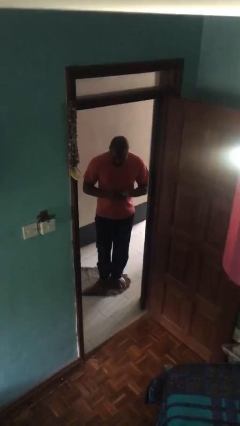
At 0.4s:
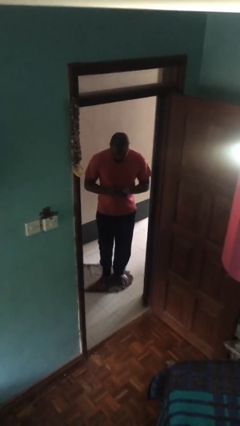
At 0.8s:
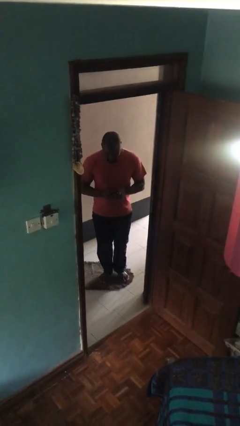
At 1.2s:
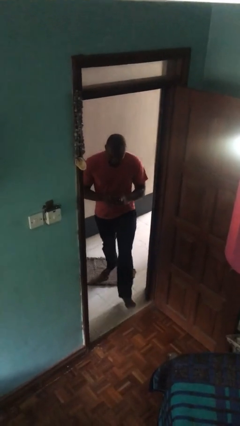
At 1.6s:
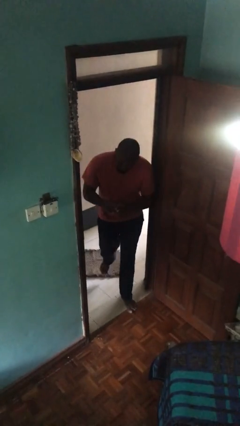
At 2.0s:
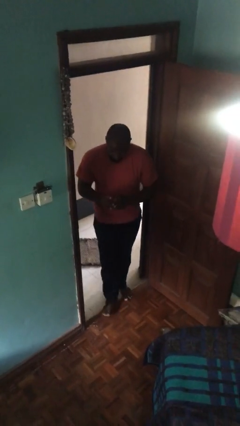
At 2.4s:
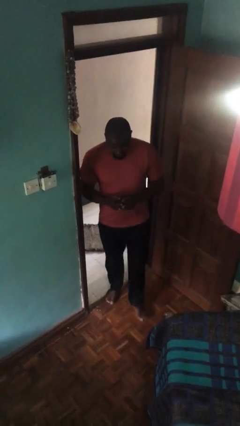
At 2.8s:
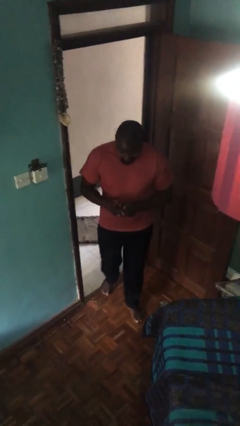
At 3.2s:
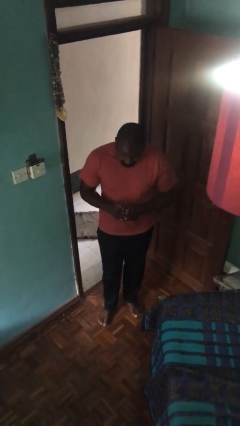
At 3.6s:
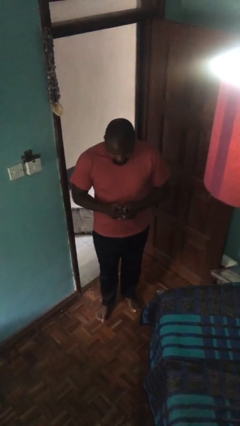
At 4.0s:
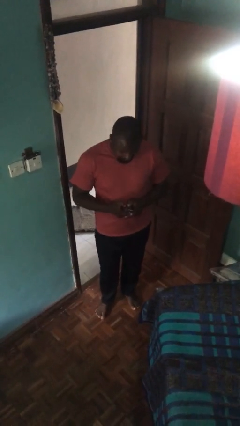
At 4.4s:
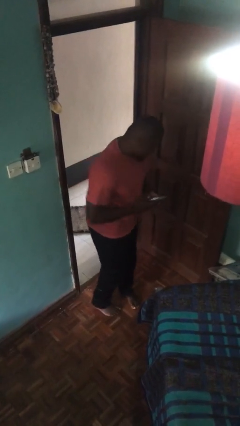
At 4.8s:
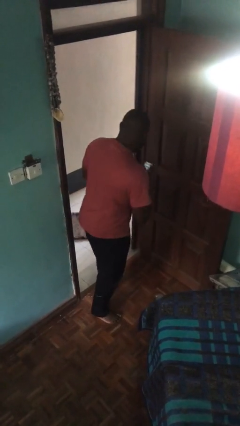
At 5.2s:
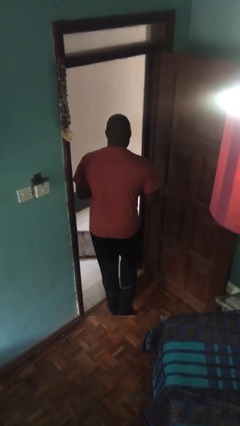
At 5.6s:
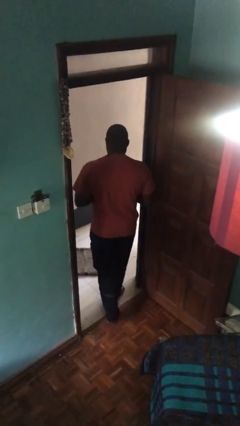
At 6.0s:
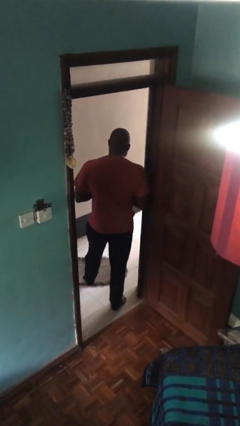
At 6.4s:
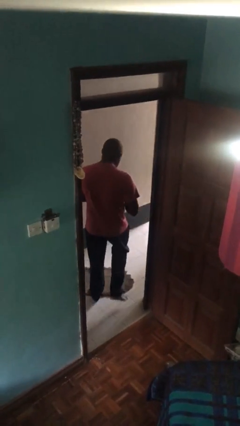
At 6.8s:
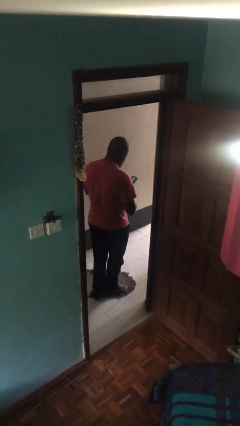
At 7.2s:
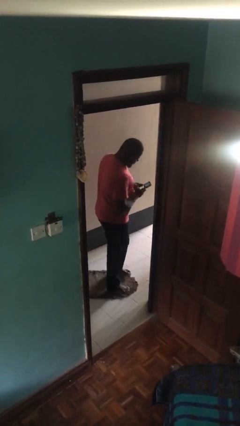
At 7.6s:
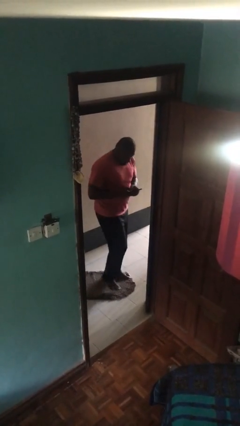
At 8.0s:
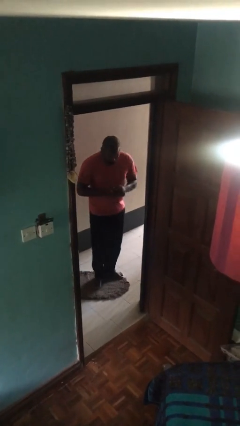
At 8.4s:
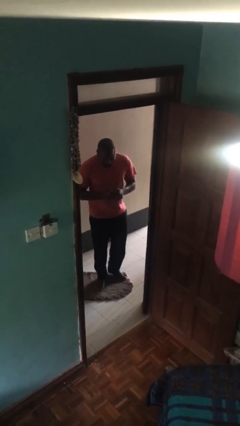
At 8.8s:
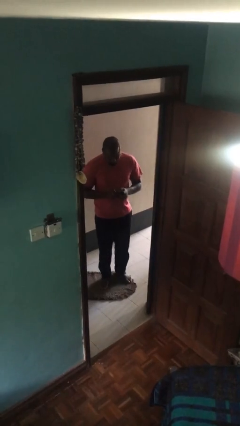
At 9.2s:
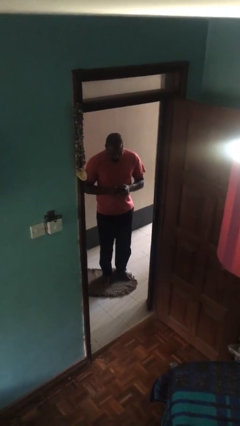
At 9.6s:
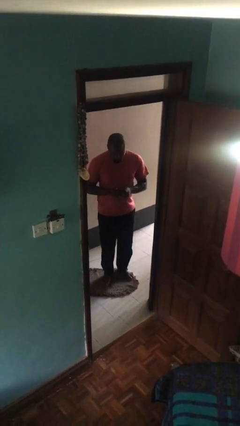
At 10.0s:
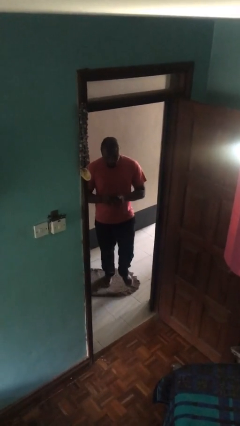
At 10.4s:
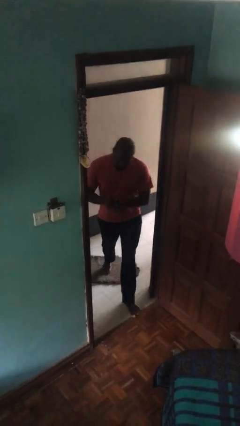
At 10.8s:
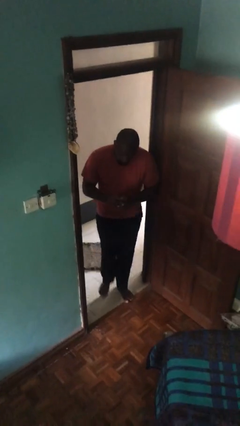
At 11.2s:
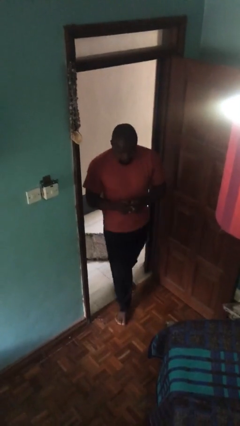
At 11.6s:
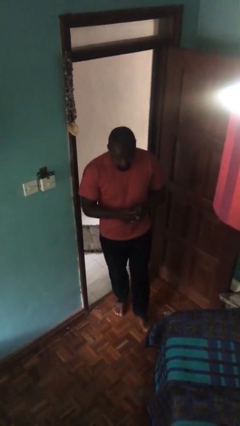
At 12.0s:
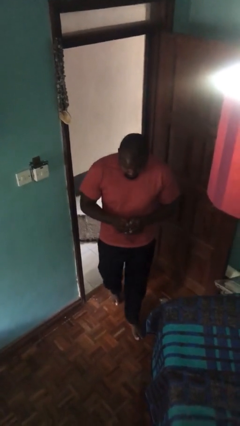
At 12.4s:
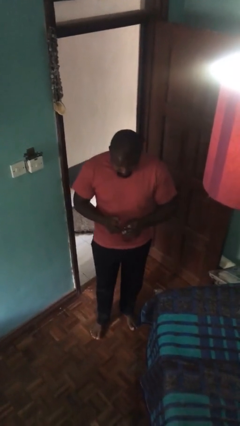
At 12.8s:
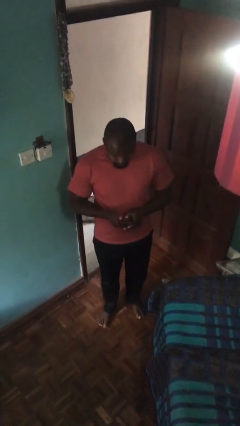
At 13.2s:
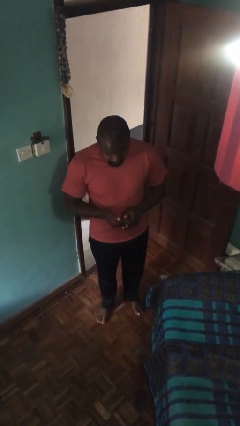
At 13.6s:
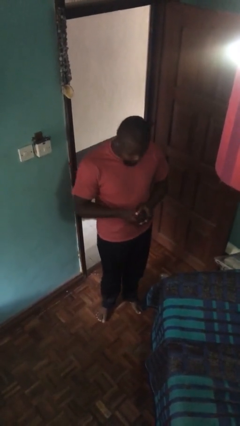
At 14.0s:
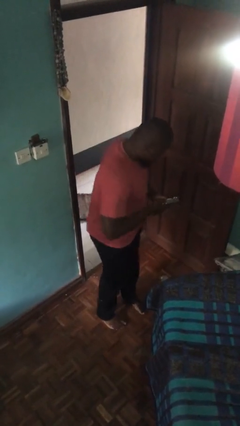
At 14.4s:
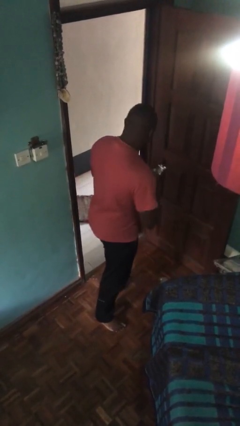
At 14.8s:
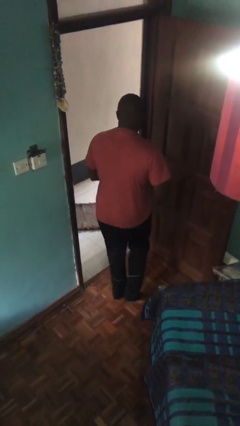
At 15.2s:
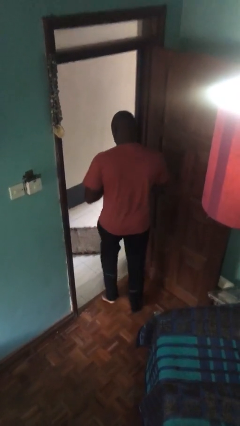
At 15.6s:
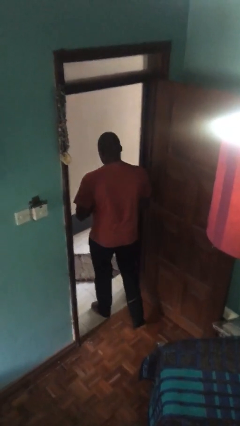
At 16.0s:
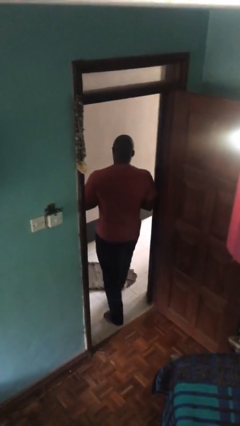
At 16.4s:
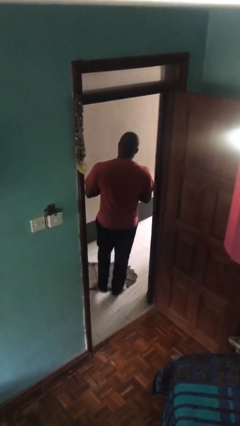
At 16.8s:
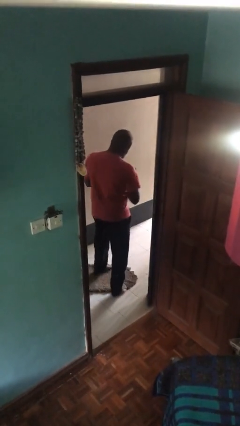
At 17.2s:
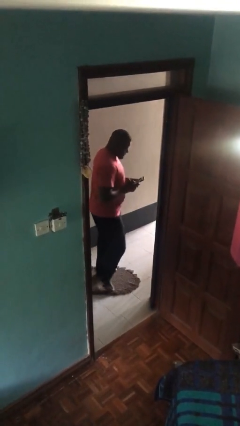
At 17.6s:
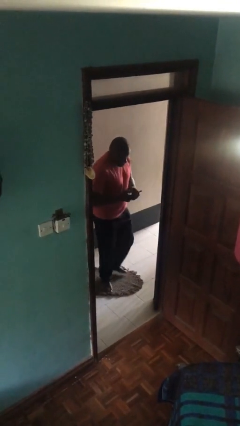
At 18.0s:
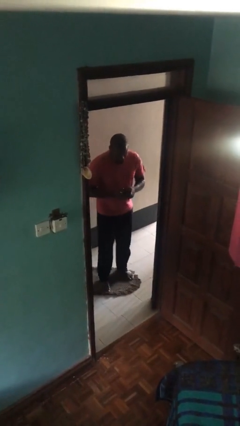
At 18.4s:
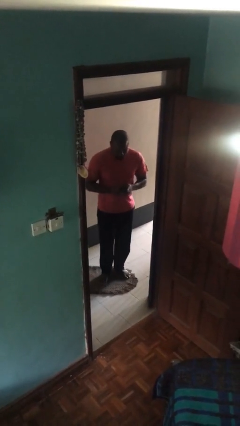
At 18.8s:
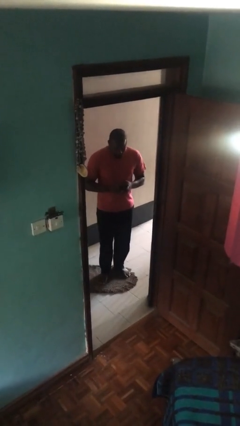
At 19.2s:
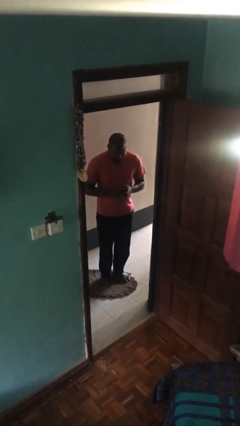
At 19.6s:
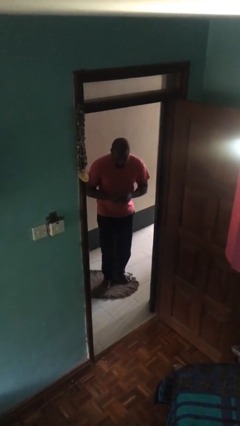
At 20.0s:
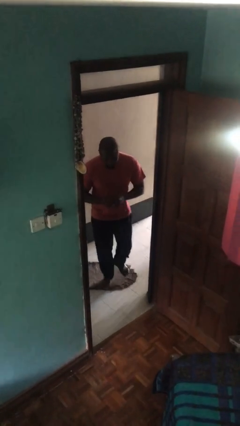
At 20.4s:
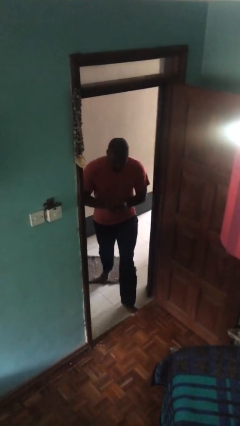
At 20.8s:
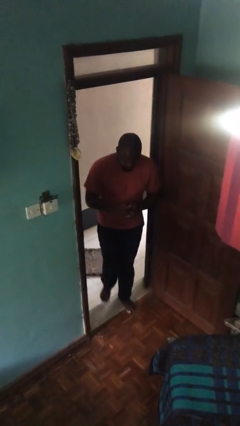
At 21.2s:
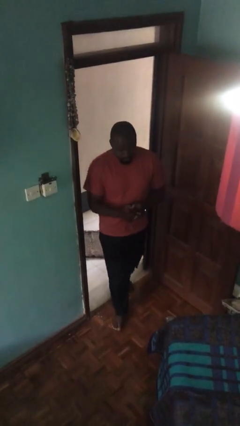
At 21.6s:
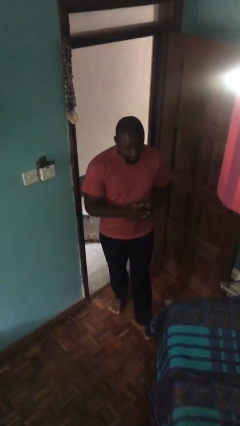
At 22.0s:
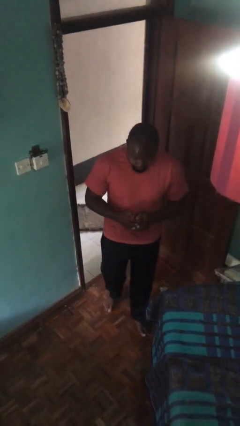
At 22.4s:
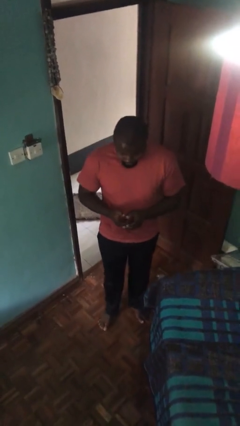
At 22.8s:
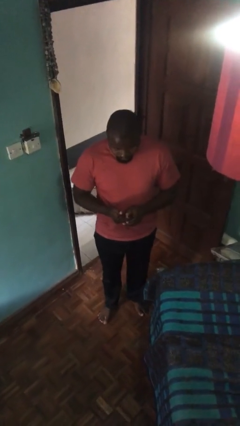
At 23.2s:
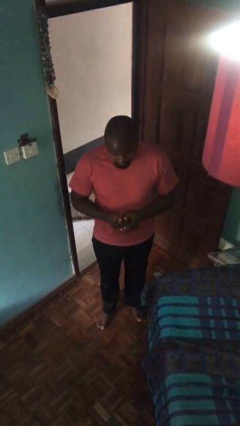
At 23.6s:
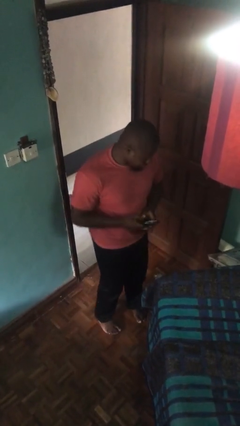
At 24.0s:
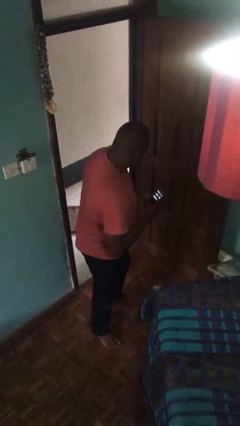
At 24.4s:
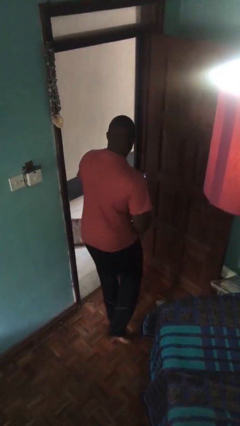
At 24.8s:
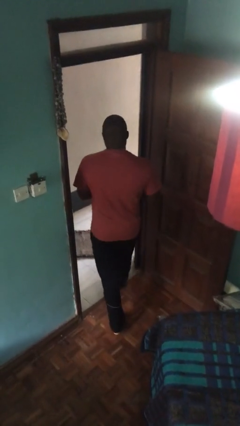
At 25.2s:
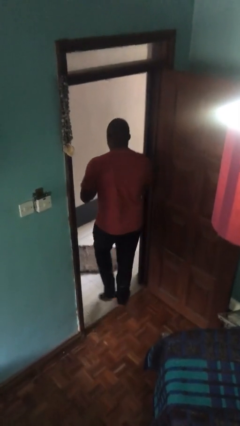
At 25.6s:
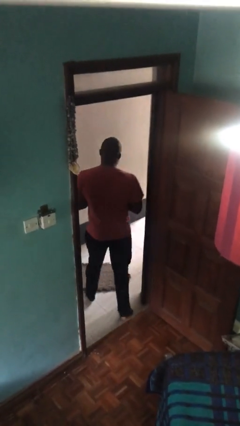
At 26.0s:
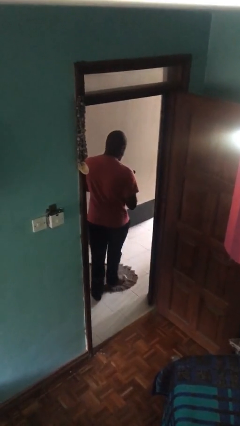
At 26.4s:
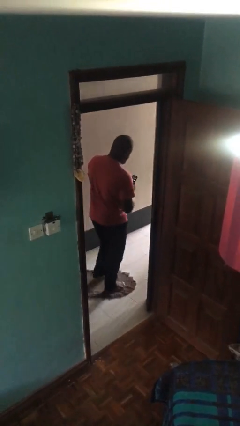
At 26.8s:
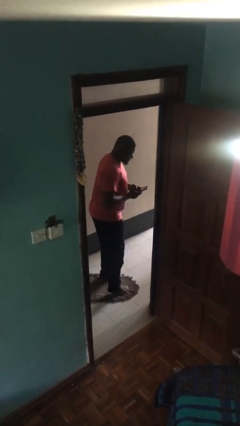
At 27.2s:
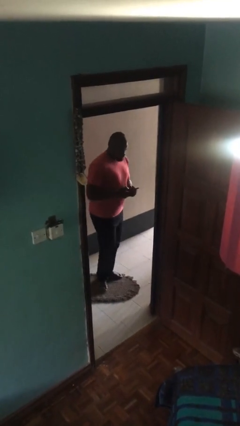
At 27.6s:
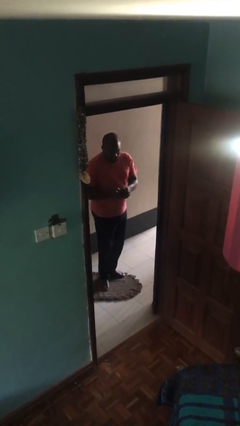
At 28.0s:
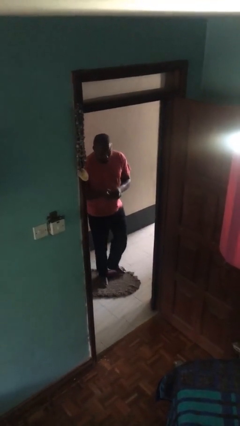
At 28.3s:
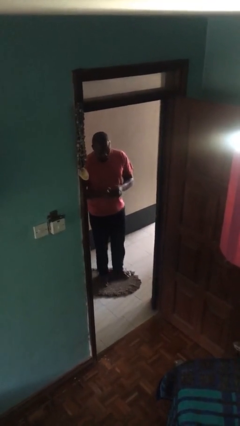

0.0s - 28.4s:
person texts on phone

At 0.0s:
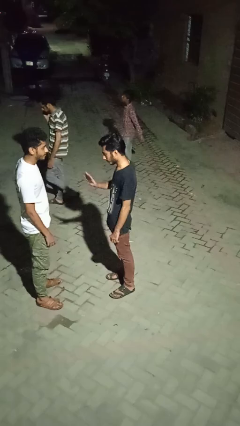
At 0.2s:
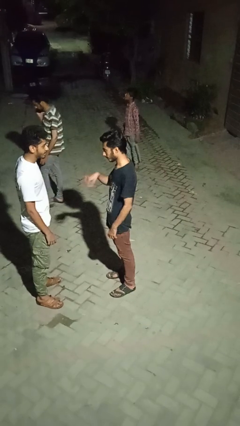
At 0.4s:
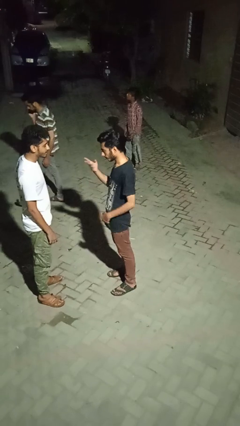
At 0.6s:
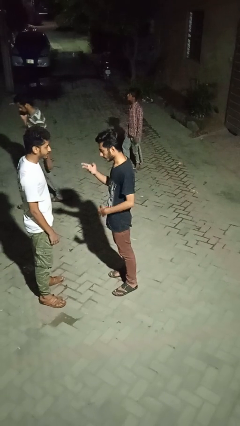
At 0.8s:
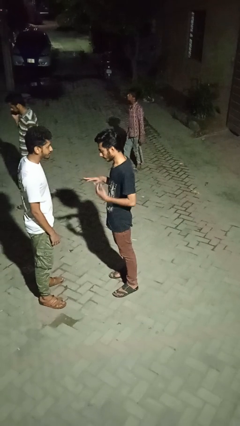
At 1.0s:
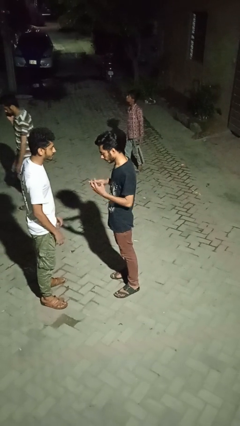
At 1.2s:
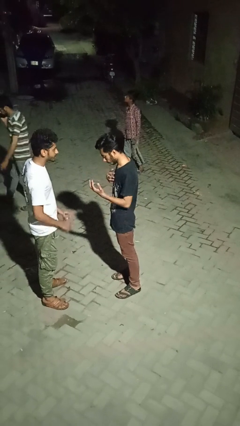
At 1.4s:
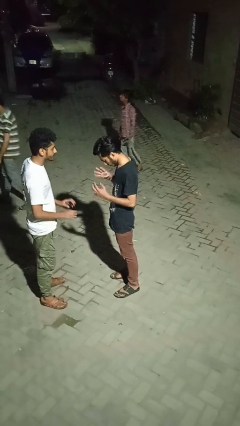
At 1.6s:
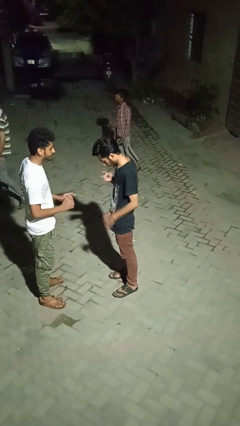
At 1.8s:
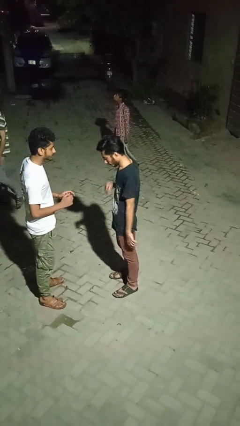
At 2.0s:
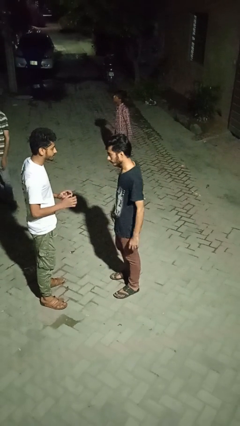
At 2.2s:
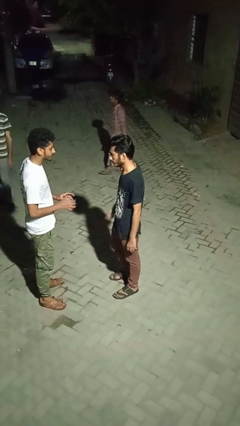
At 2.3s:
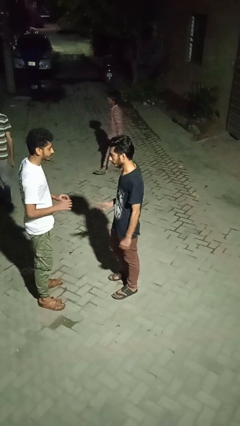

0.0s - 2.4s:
person talks to person

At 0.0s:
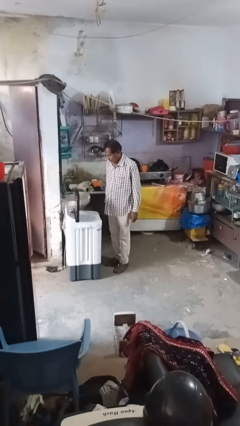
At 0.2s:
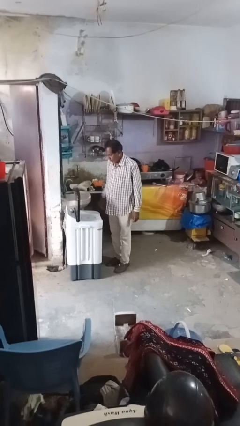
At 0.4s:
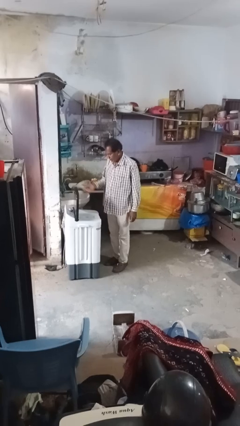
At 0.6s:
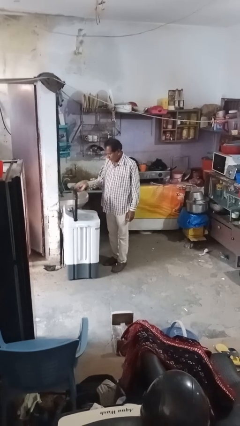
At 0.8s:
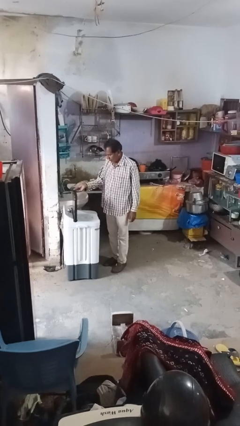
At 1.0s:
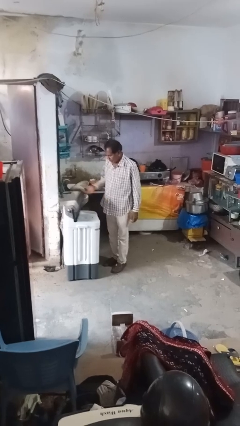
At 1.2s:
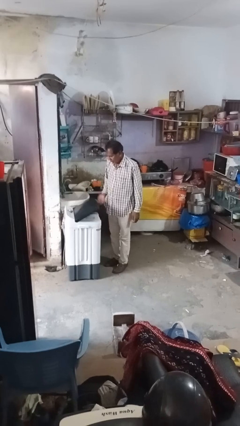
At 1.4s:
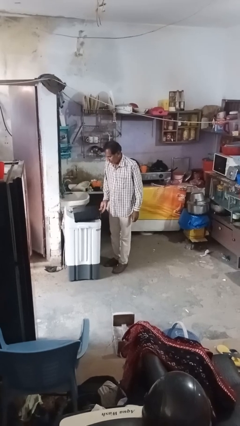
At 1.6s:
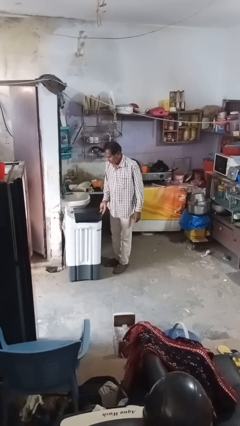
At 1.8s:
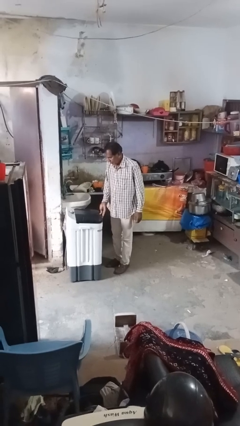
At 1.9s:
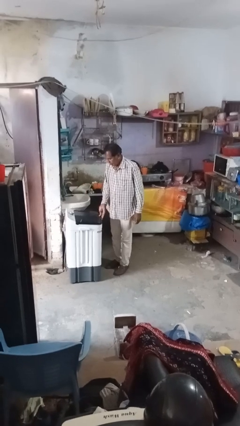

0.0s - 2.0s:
person closes clothes washer
